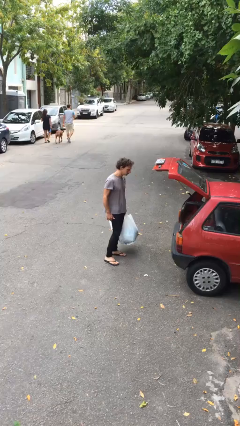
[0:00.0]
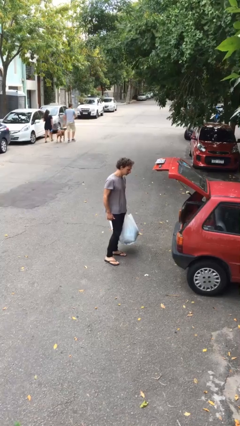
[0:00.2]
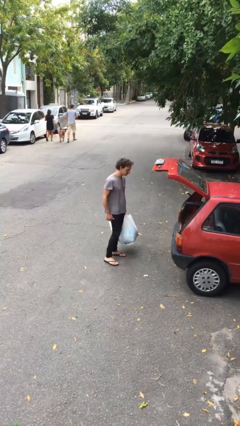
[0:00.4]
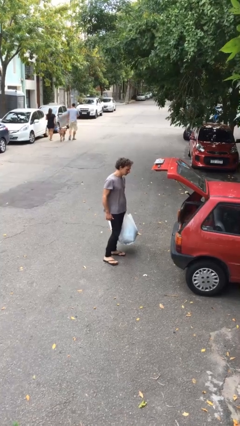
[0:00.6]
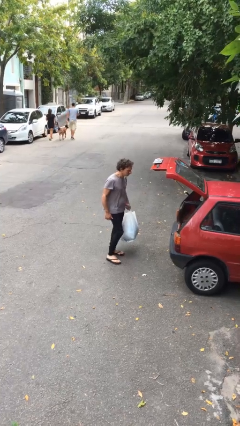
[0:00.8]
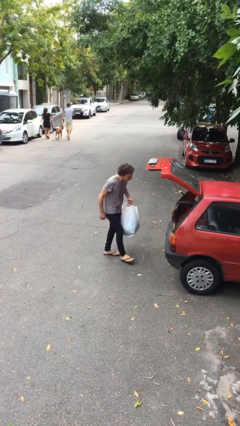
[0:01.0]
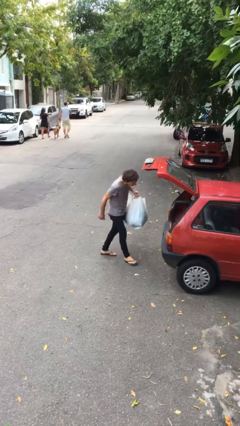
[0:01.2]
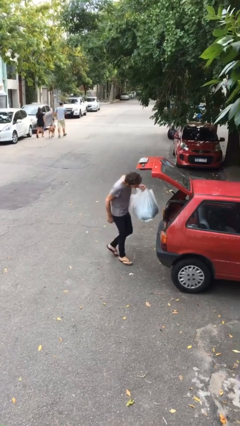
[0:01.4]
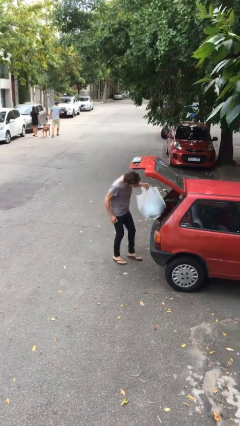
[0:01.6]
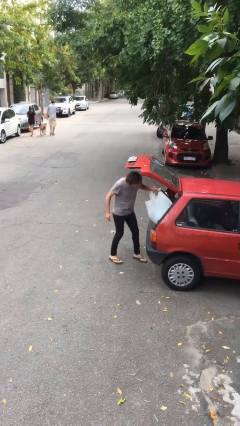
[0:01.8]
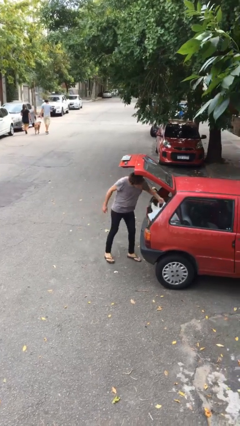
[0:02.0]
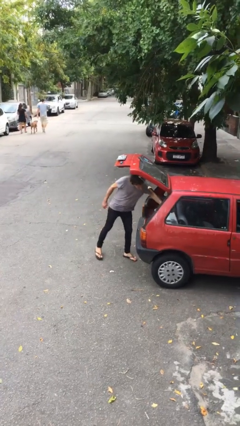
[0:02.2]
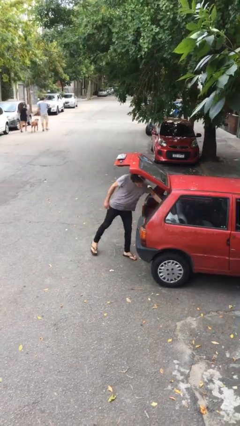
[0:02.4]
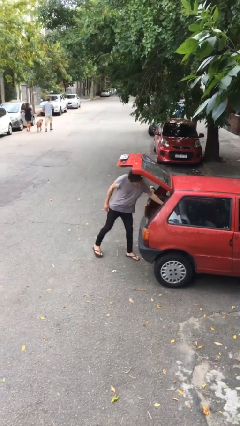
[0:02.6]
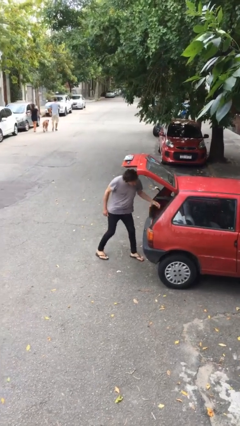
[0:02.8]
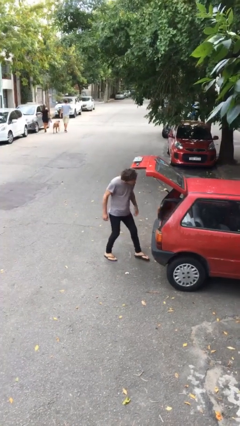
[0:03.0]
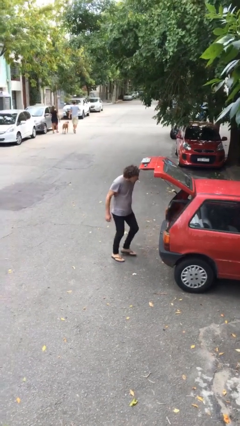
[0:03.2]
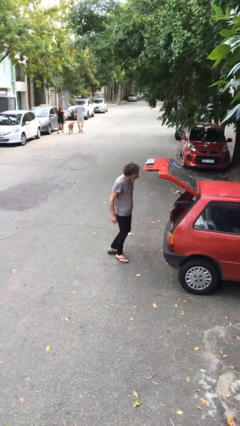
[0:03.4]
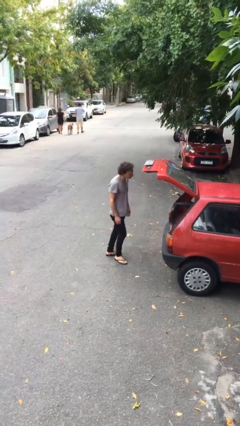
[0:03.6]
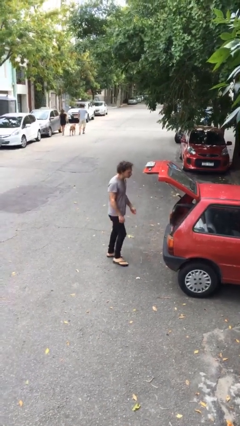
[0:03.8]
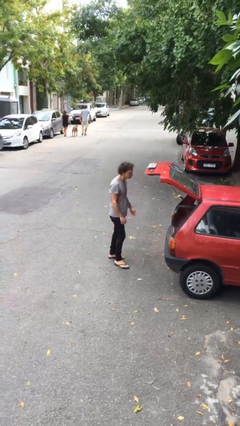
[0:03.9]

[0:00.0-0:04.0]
person loads car

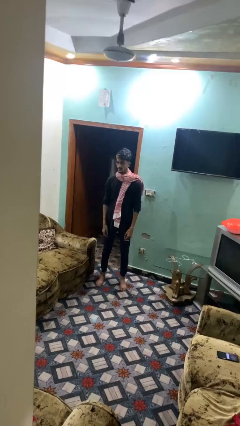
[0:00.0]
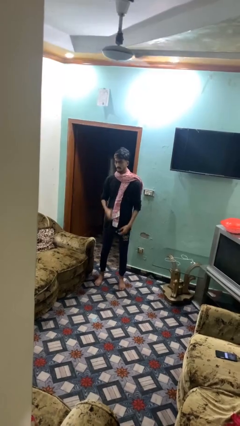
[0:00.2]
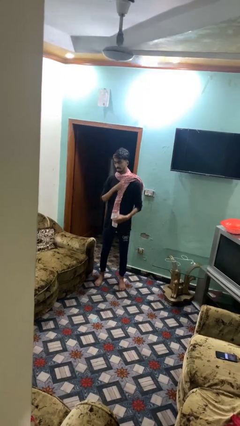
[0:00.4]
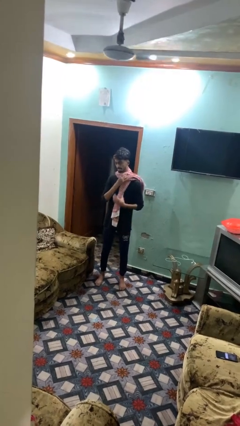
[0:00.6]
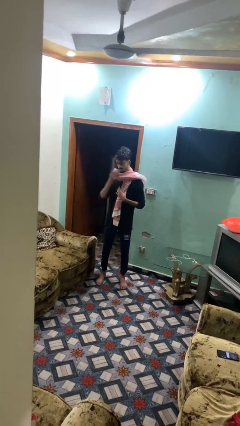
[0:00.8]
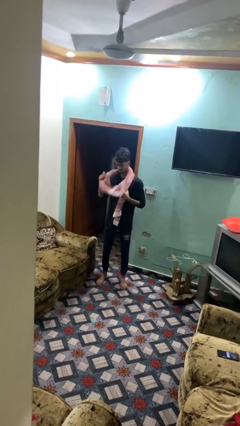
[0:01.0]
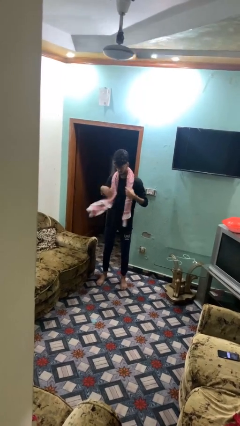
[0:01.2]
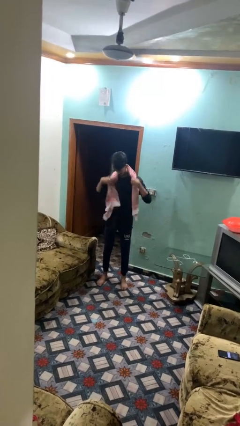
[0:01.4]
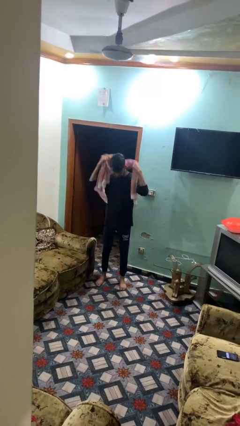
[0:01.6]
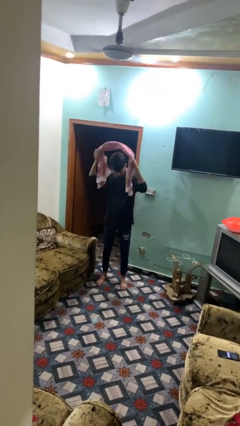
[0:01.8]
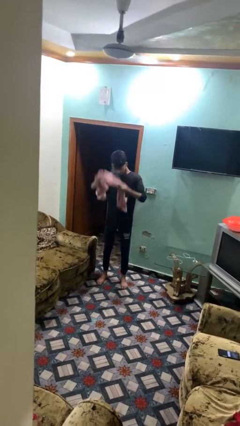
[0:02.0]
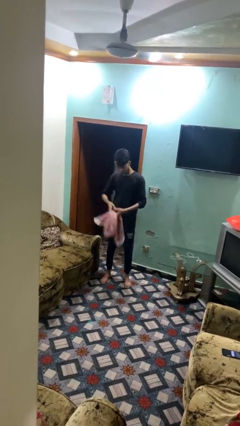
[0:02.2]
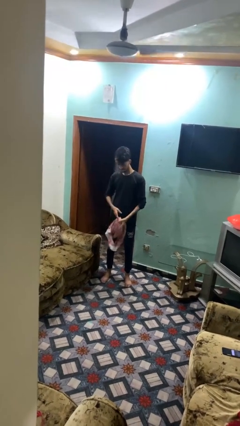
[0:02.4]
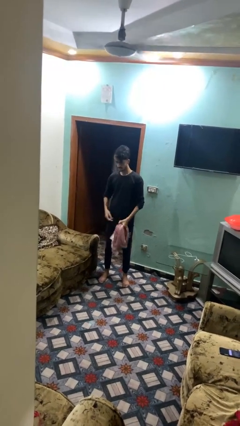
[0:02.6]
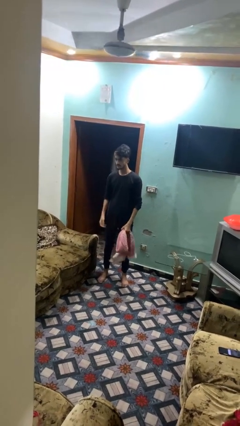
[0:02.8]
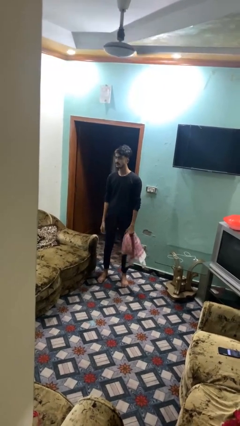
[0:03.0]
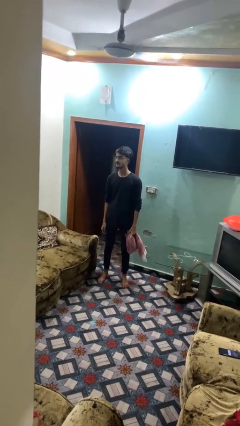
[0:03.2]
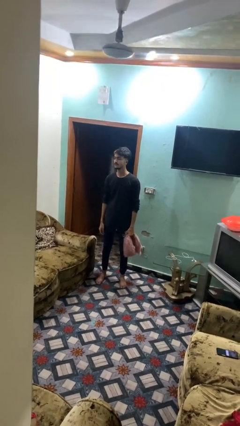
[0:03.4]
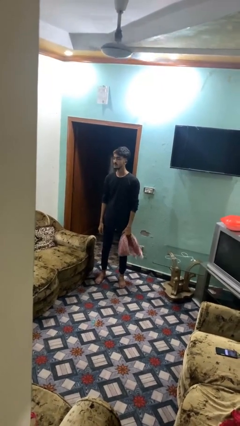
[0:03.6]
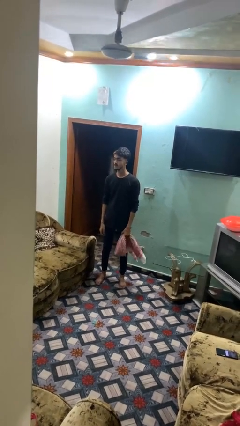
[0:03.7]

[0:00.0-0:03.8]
person takes off scarf

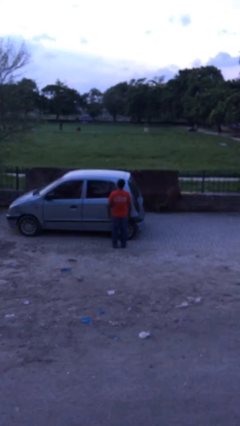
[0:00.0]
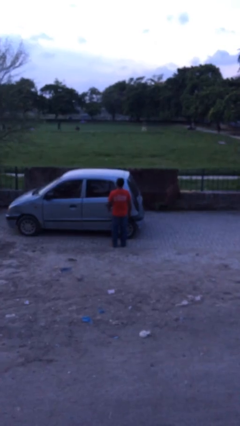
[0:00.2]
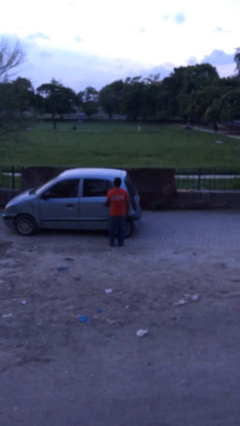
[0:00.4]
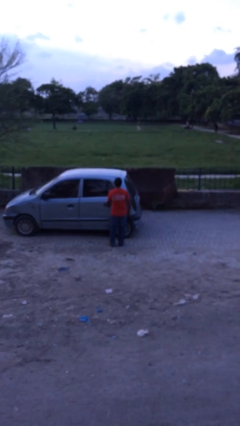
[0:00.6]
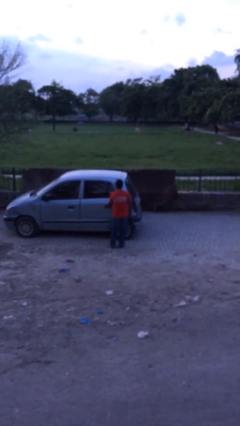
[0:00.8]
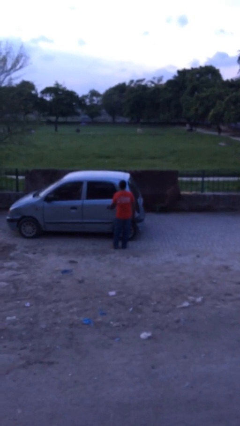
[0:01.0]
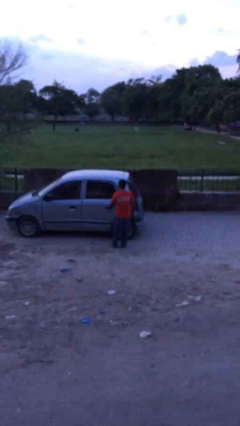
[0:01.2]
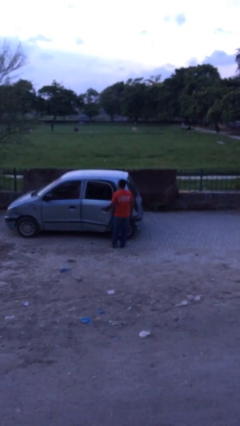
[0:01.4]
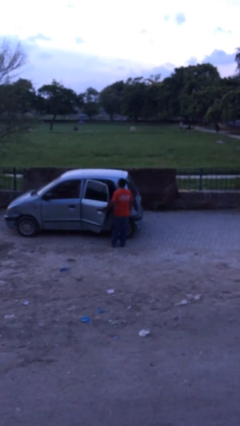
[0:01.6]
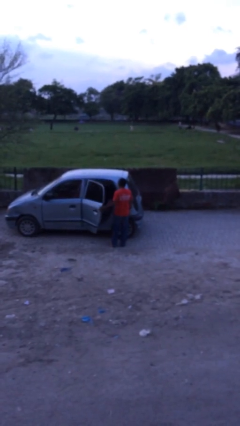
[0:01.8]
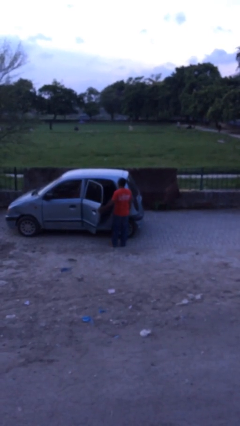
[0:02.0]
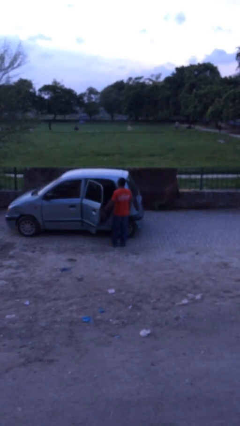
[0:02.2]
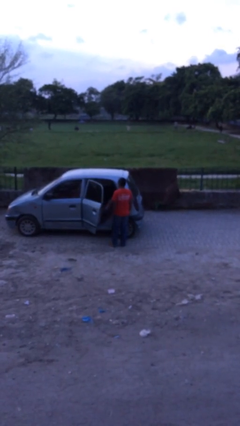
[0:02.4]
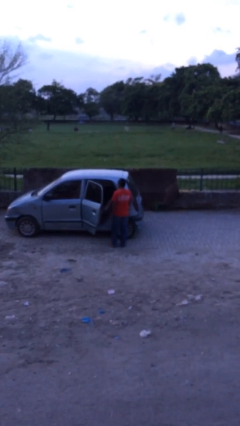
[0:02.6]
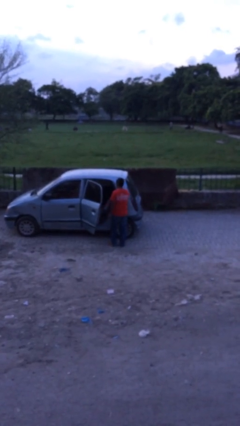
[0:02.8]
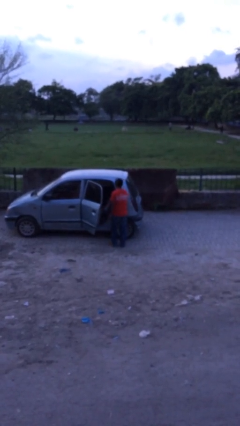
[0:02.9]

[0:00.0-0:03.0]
person opens car door

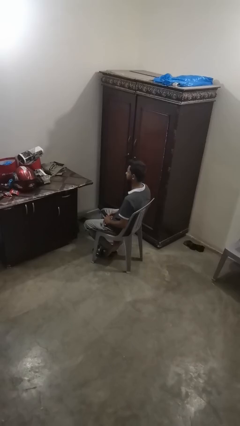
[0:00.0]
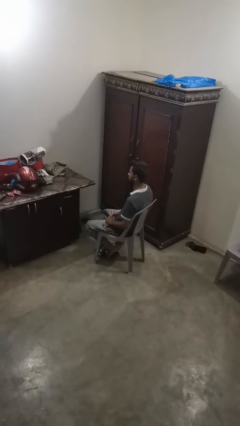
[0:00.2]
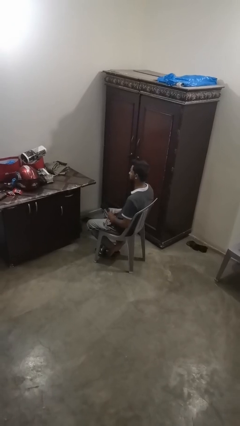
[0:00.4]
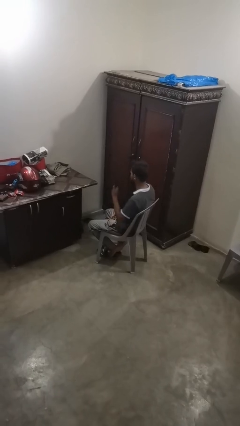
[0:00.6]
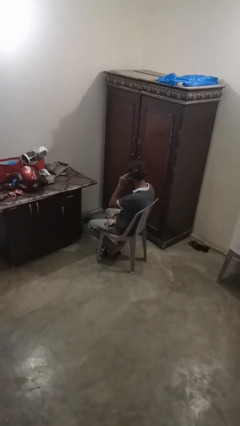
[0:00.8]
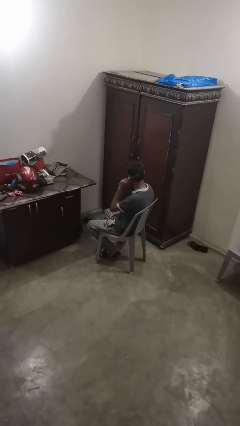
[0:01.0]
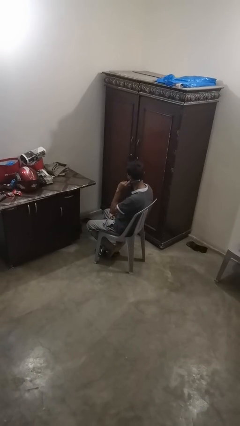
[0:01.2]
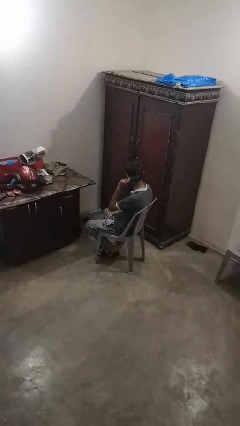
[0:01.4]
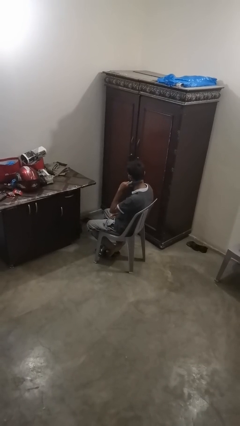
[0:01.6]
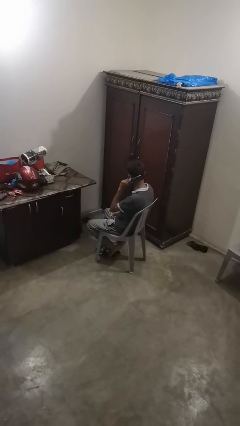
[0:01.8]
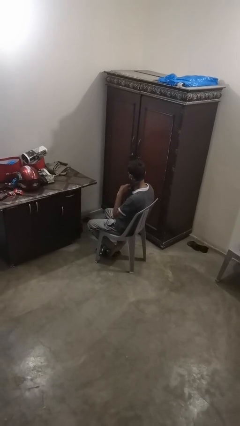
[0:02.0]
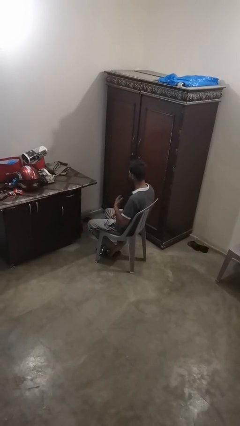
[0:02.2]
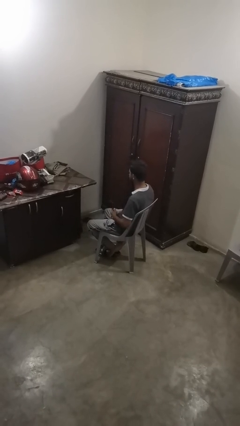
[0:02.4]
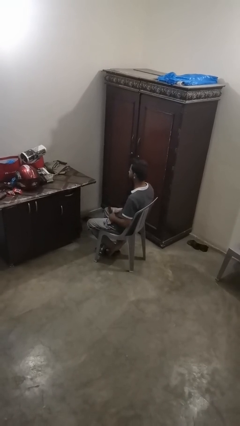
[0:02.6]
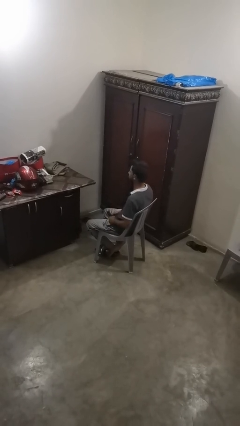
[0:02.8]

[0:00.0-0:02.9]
person brushes hair

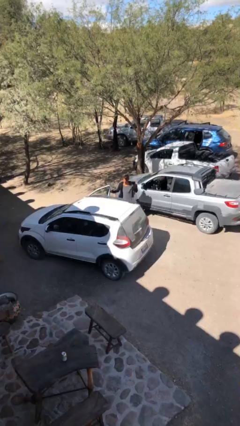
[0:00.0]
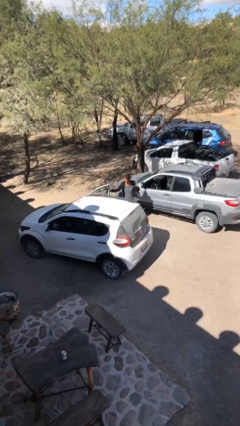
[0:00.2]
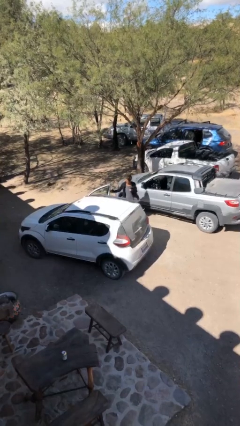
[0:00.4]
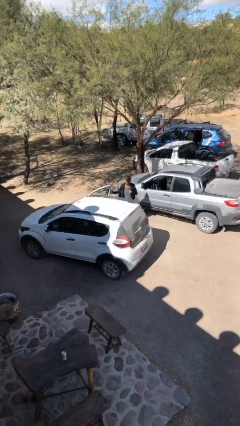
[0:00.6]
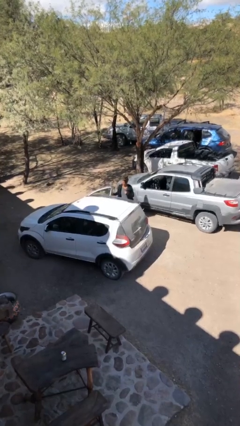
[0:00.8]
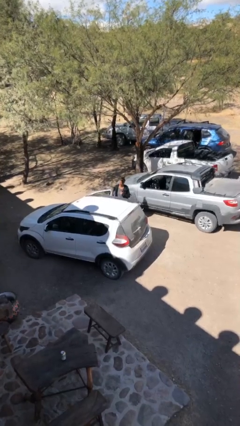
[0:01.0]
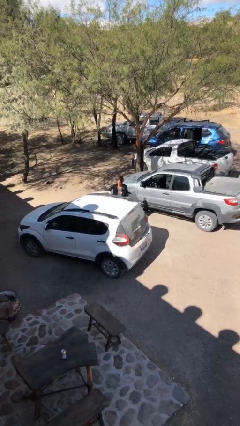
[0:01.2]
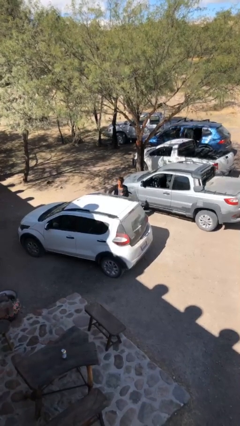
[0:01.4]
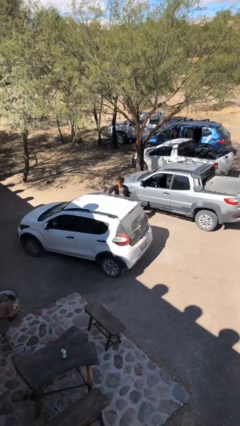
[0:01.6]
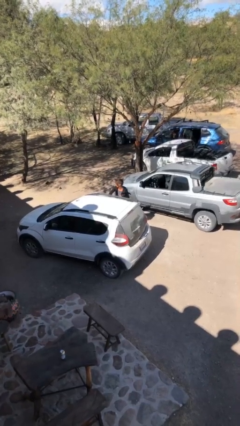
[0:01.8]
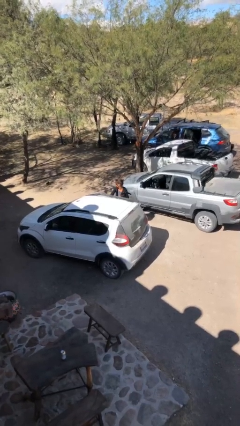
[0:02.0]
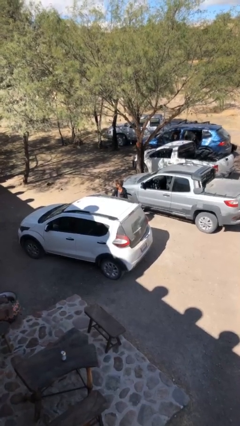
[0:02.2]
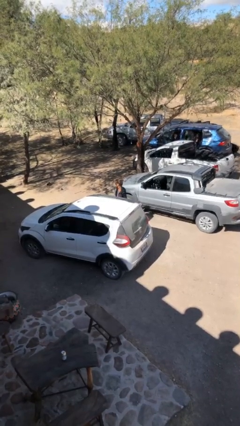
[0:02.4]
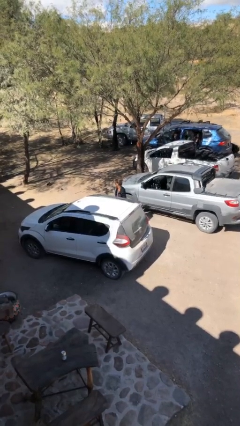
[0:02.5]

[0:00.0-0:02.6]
person closes car door

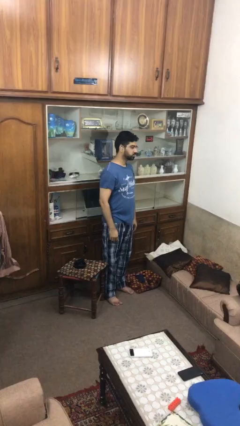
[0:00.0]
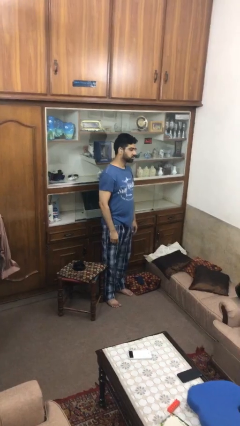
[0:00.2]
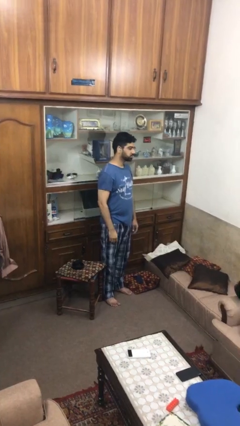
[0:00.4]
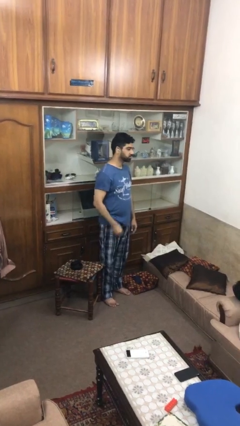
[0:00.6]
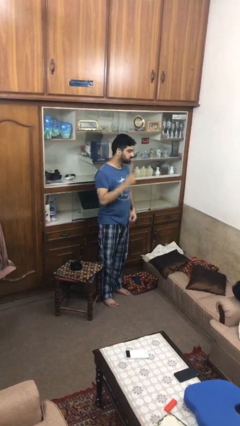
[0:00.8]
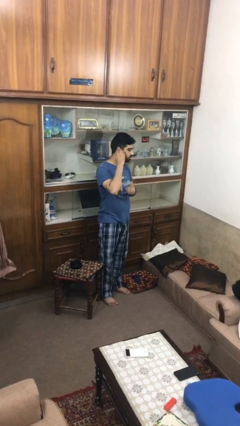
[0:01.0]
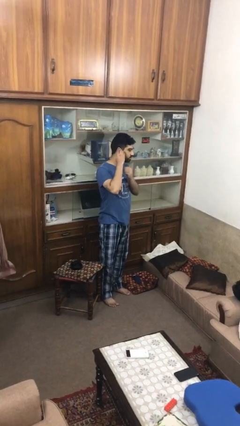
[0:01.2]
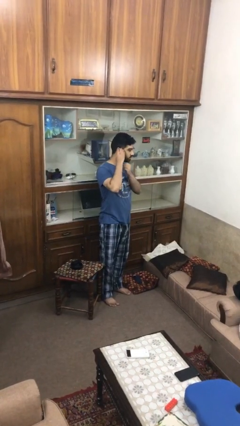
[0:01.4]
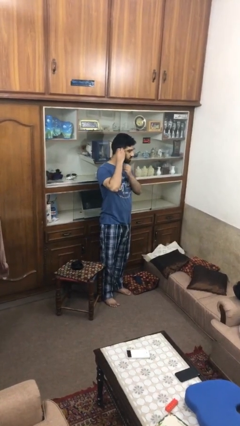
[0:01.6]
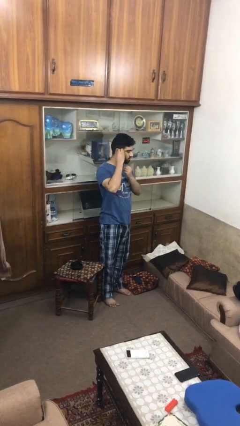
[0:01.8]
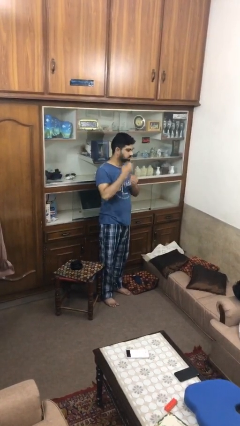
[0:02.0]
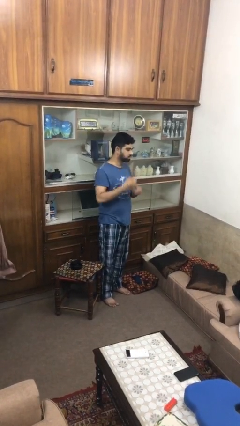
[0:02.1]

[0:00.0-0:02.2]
person takes off earrings
